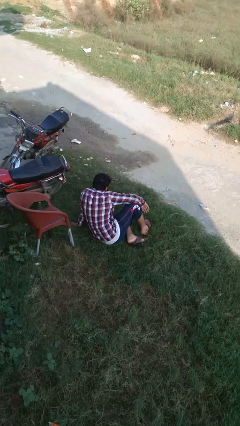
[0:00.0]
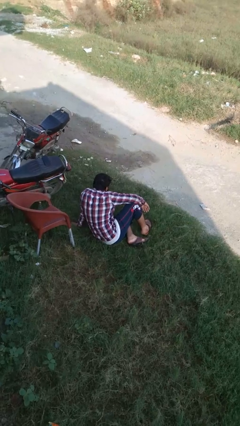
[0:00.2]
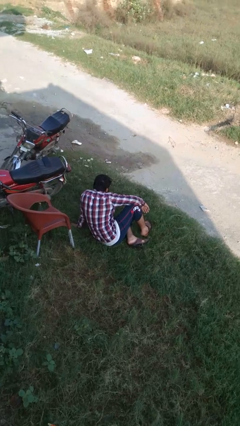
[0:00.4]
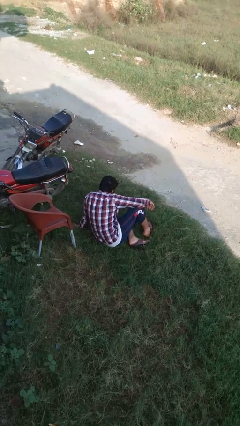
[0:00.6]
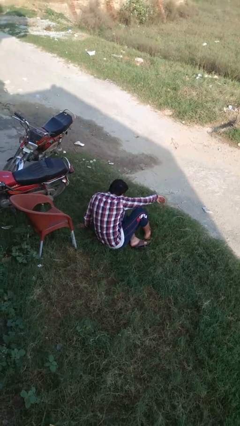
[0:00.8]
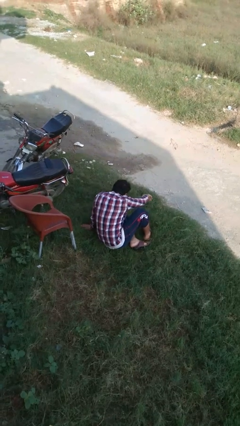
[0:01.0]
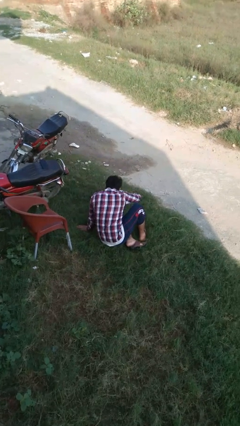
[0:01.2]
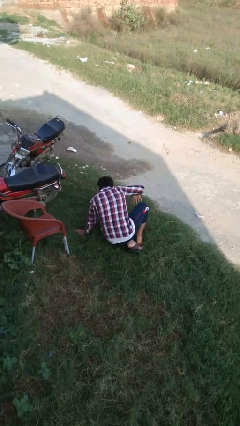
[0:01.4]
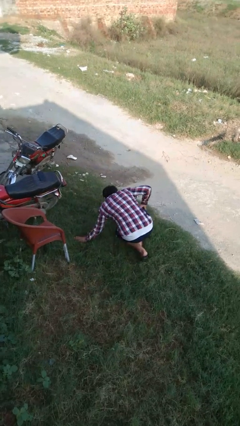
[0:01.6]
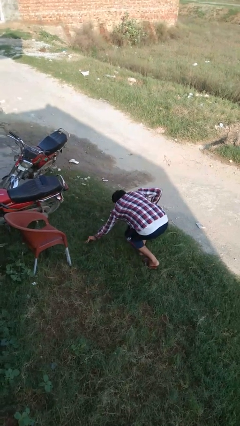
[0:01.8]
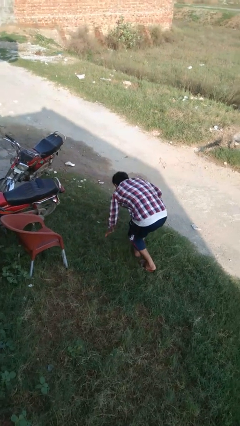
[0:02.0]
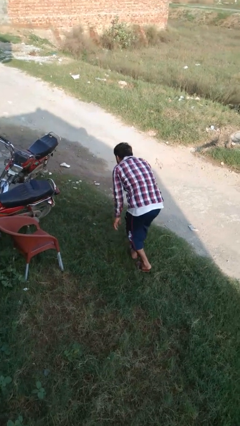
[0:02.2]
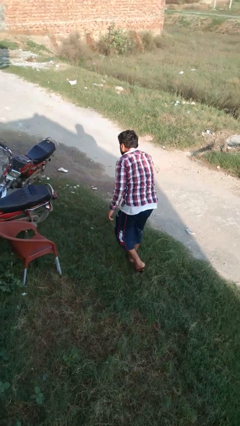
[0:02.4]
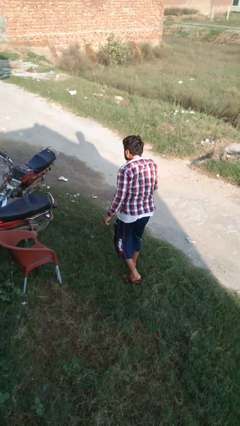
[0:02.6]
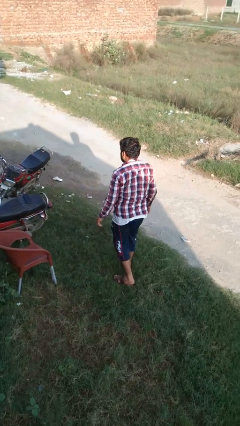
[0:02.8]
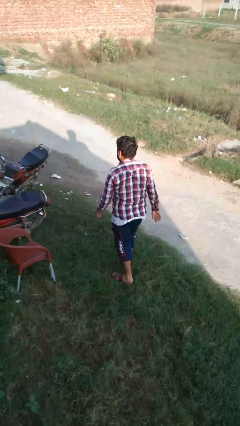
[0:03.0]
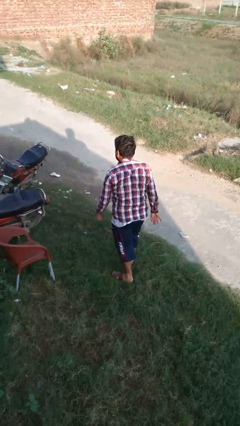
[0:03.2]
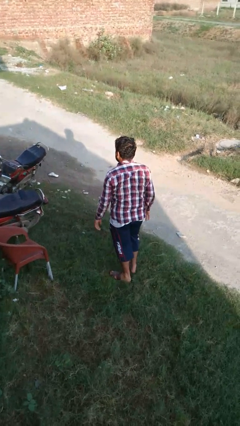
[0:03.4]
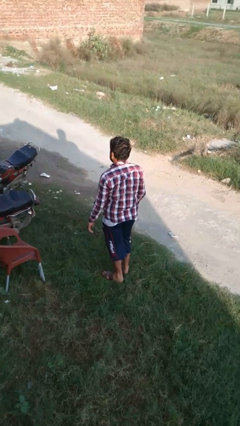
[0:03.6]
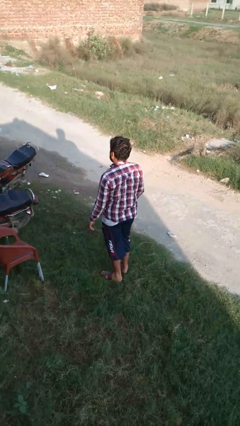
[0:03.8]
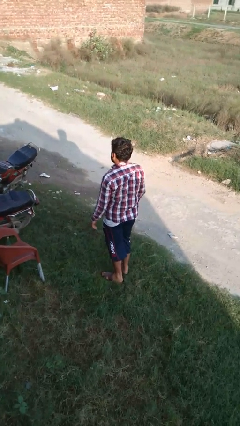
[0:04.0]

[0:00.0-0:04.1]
person stands up from floor

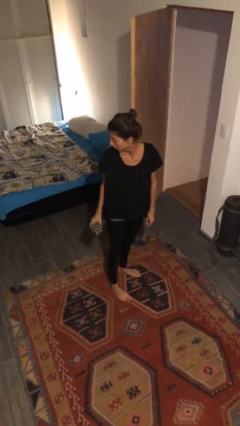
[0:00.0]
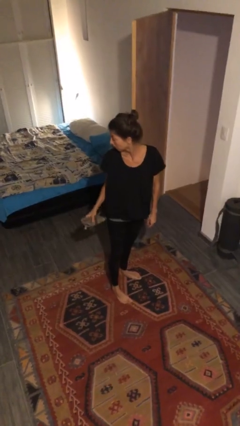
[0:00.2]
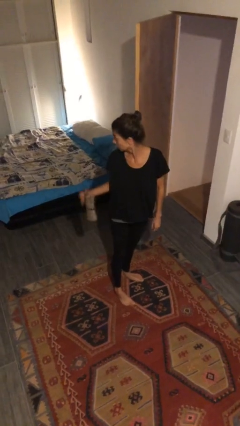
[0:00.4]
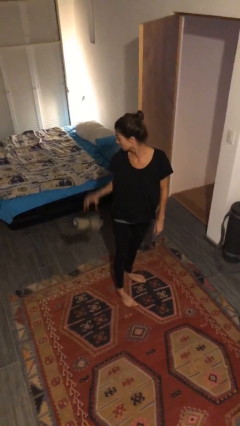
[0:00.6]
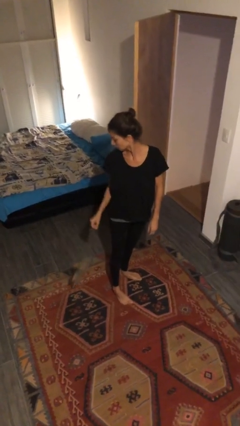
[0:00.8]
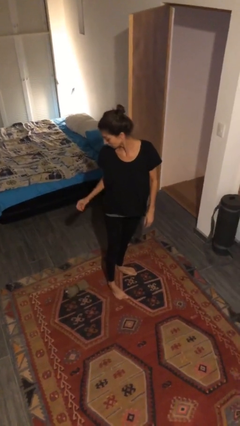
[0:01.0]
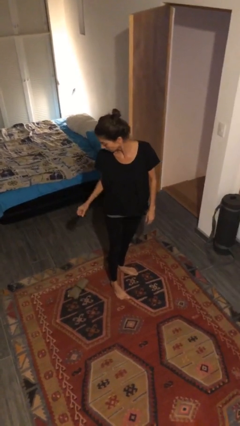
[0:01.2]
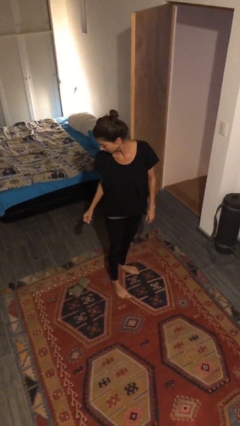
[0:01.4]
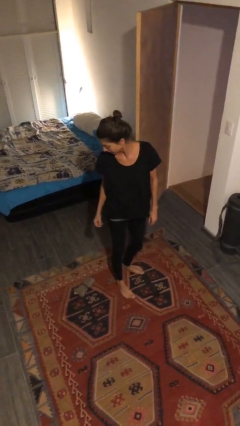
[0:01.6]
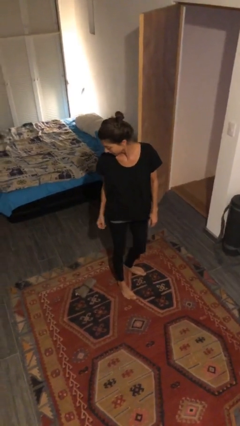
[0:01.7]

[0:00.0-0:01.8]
person drops object

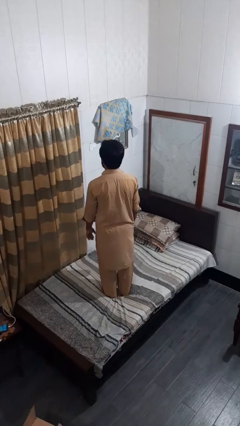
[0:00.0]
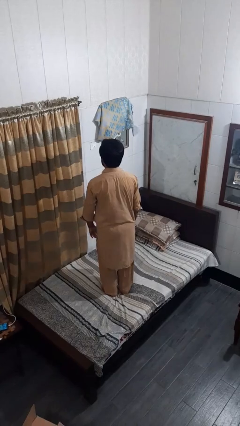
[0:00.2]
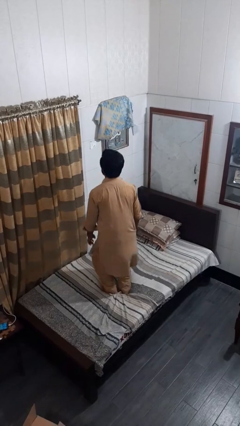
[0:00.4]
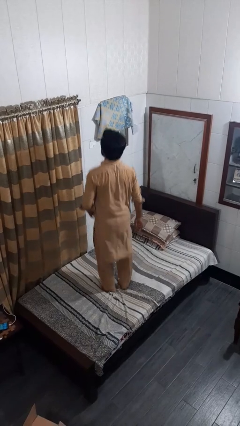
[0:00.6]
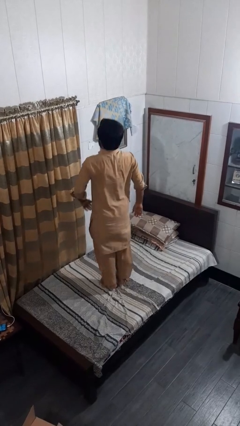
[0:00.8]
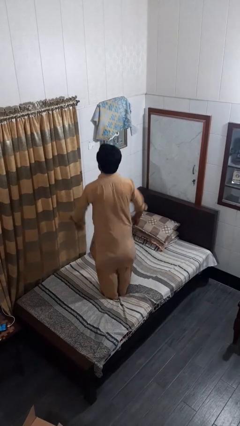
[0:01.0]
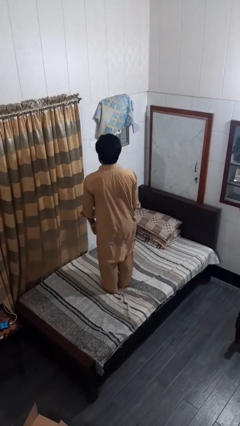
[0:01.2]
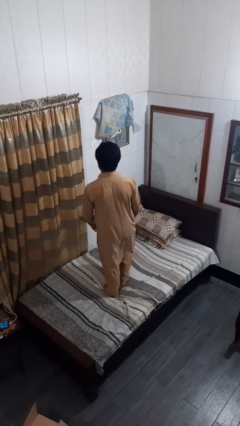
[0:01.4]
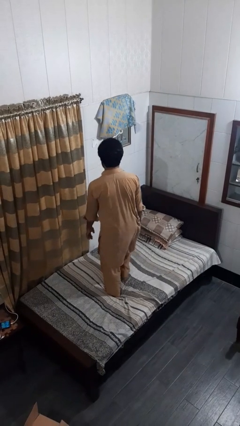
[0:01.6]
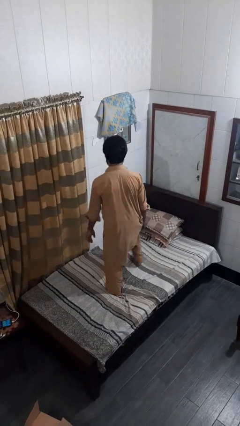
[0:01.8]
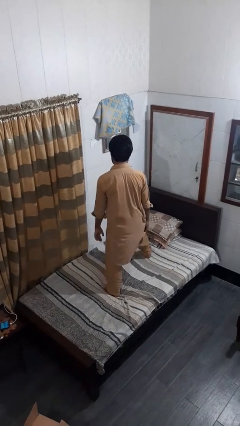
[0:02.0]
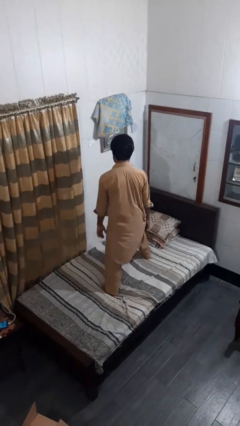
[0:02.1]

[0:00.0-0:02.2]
person jumps on bed

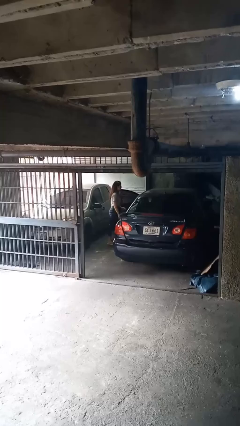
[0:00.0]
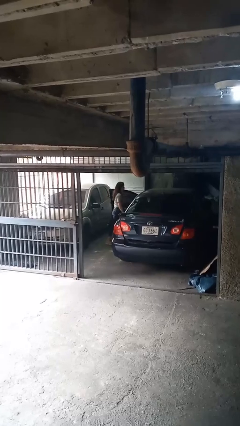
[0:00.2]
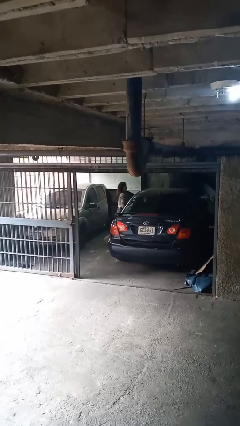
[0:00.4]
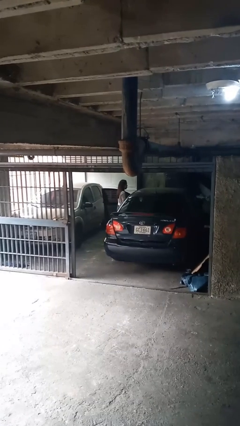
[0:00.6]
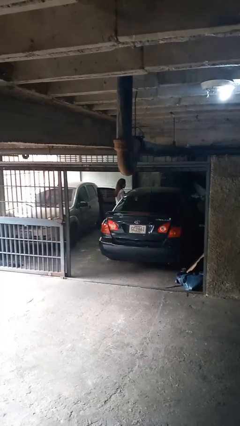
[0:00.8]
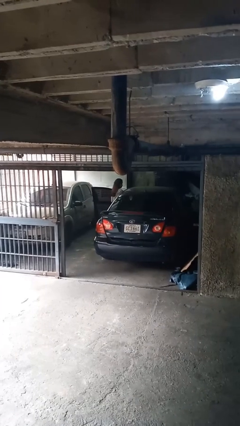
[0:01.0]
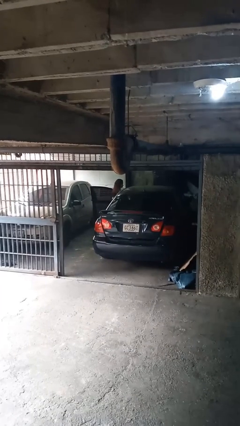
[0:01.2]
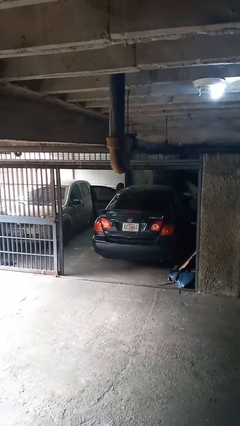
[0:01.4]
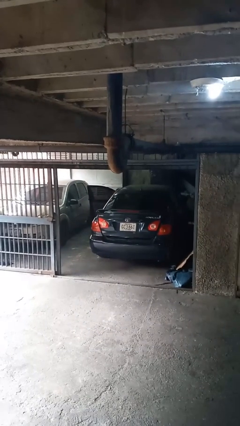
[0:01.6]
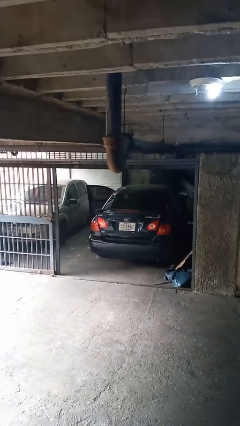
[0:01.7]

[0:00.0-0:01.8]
person enters car

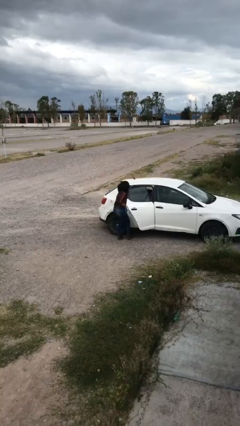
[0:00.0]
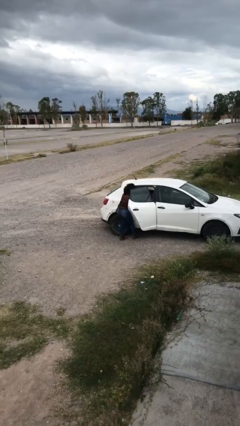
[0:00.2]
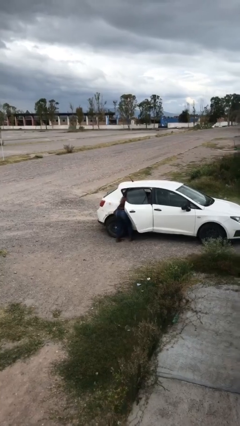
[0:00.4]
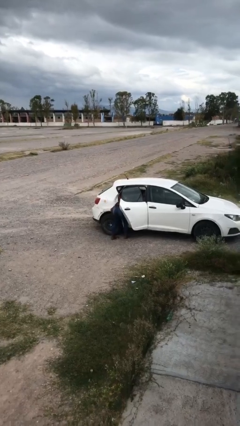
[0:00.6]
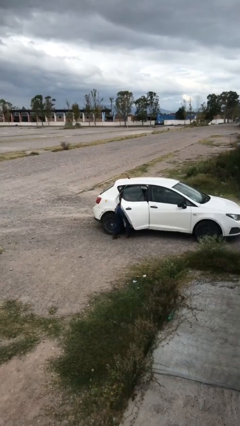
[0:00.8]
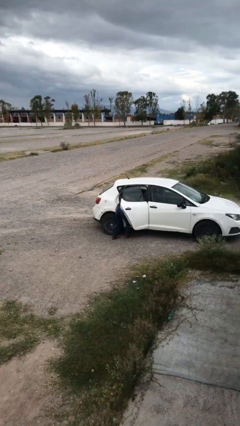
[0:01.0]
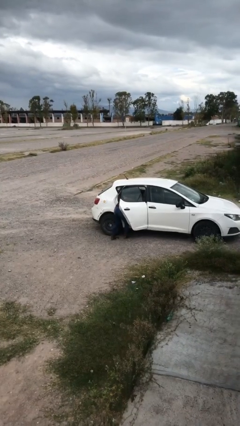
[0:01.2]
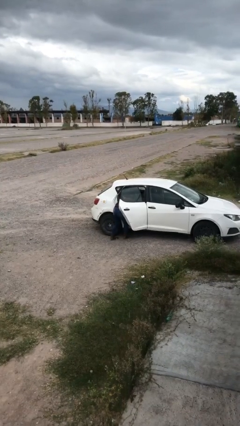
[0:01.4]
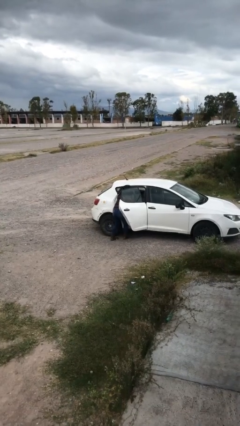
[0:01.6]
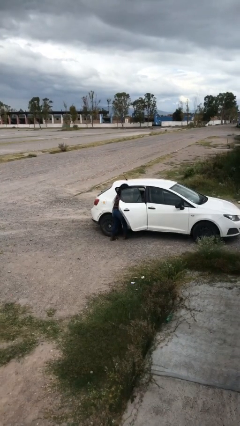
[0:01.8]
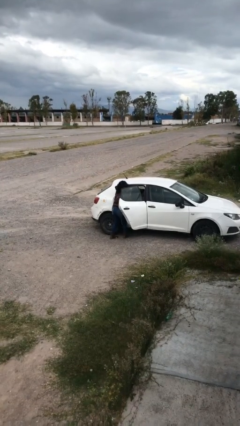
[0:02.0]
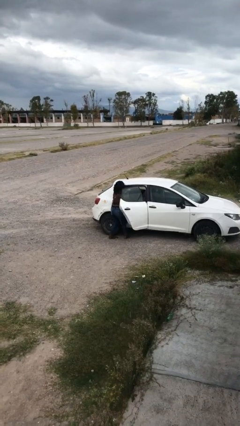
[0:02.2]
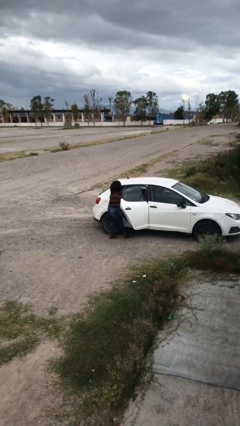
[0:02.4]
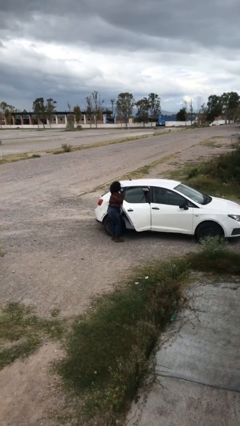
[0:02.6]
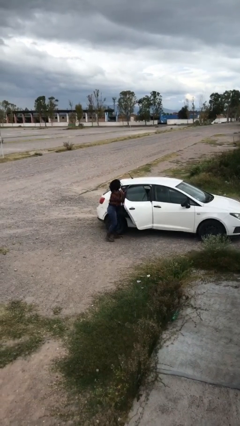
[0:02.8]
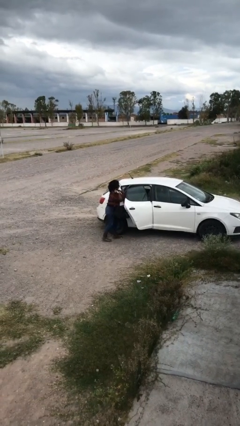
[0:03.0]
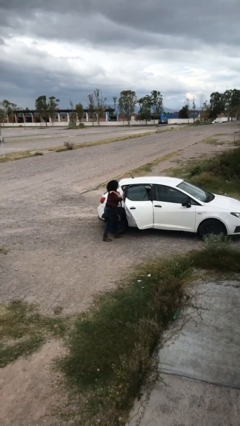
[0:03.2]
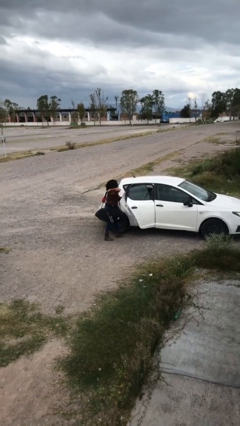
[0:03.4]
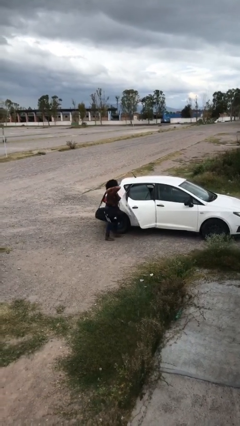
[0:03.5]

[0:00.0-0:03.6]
person unloads car

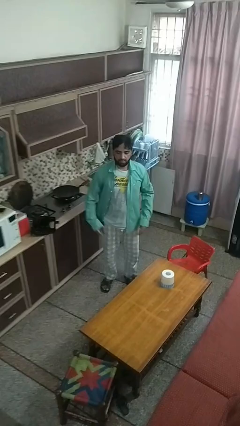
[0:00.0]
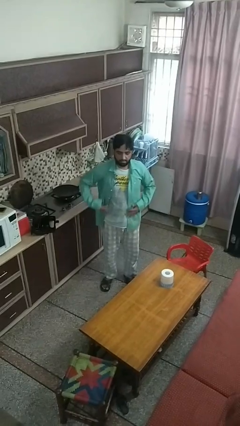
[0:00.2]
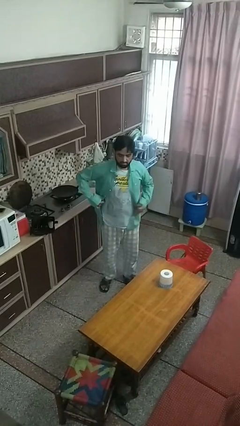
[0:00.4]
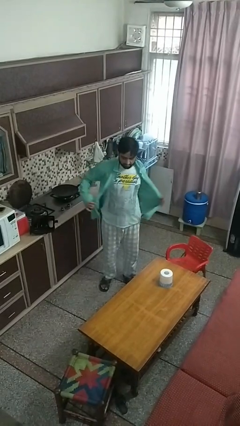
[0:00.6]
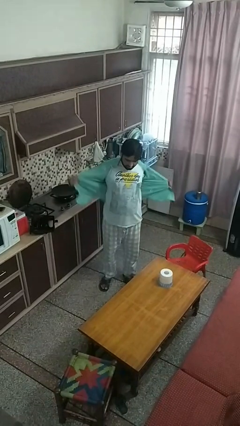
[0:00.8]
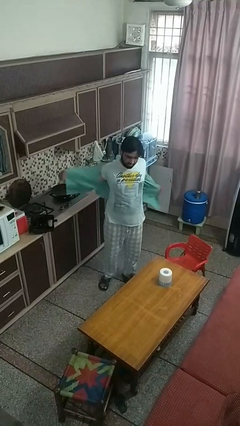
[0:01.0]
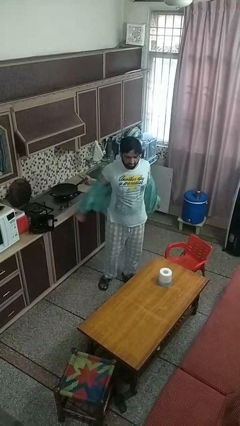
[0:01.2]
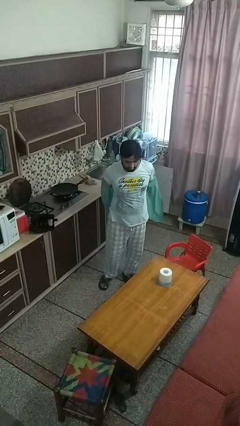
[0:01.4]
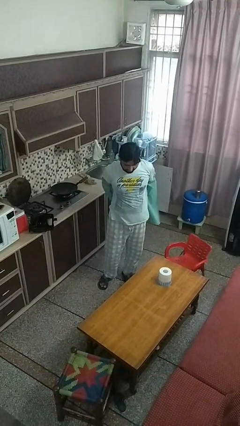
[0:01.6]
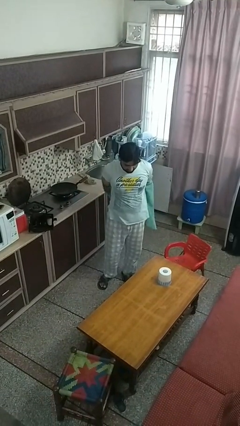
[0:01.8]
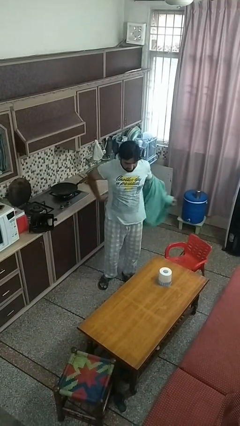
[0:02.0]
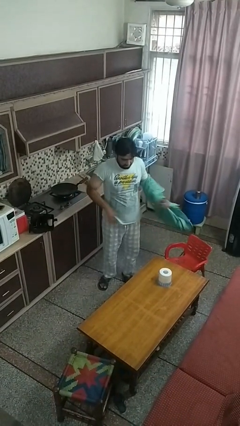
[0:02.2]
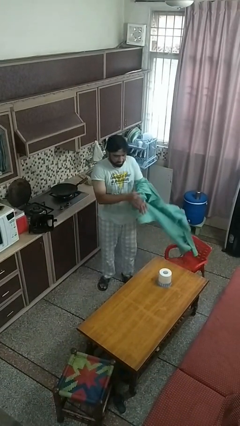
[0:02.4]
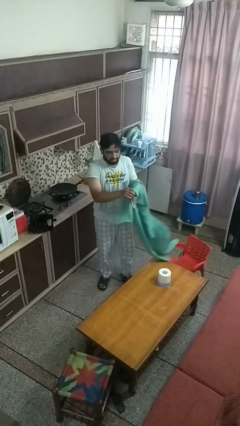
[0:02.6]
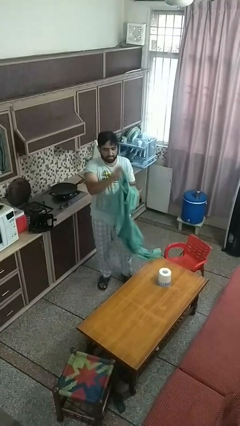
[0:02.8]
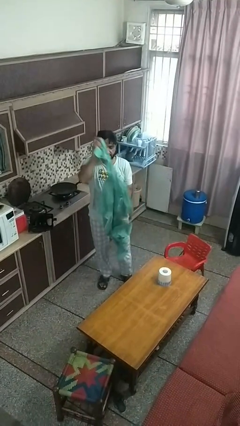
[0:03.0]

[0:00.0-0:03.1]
person takes off shirt

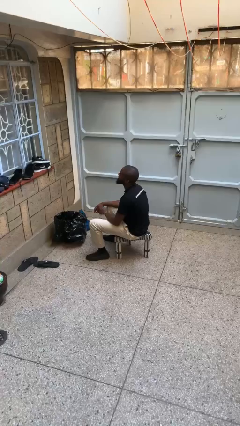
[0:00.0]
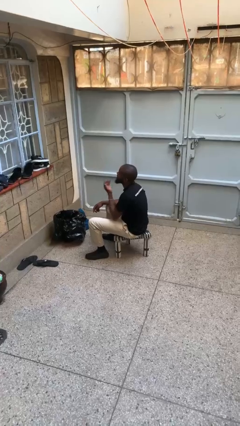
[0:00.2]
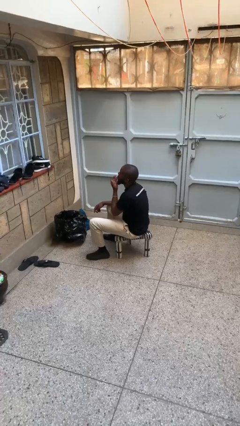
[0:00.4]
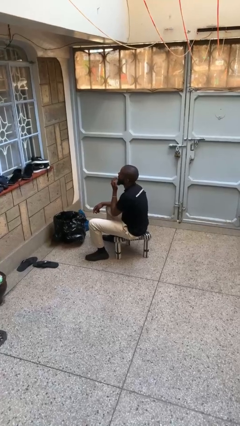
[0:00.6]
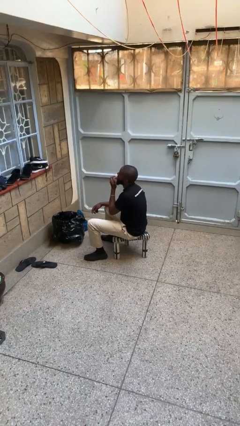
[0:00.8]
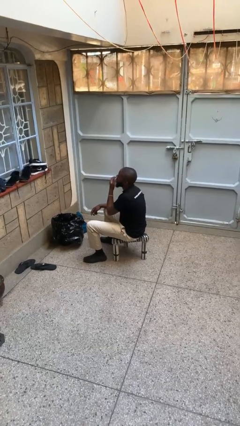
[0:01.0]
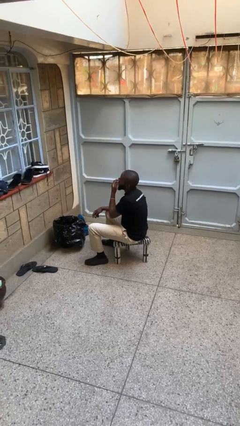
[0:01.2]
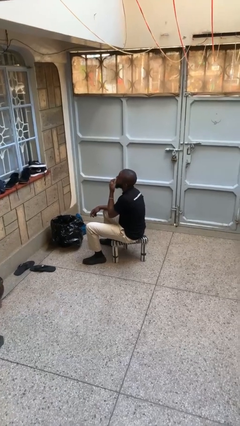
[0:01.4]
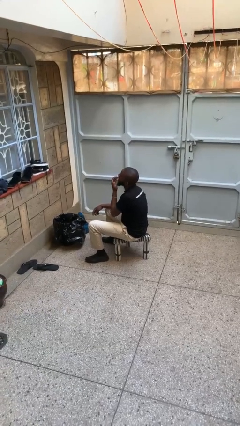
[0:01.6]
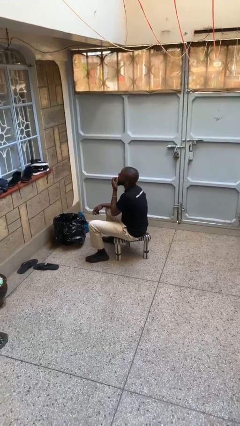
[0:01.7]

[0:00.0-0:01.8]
person licks fingers
